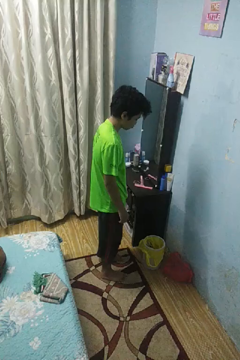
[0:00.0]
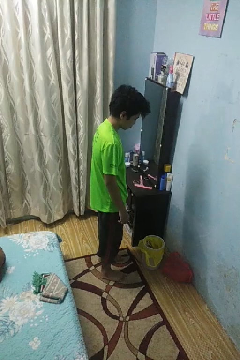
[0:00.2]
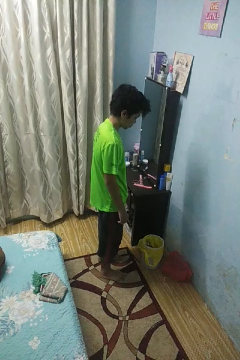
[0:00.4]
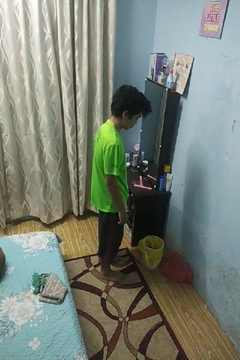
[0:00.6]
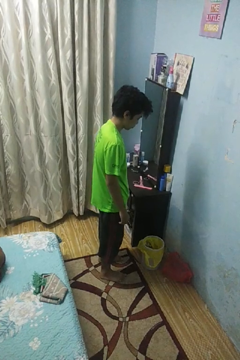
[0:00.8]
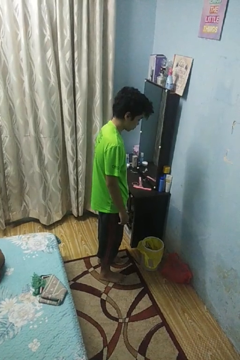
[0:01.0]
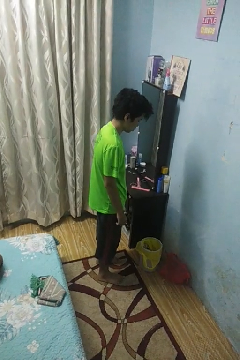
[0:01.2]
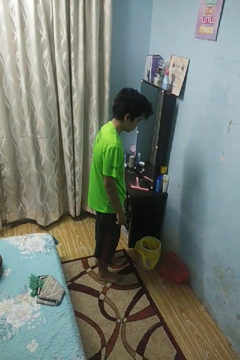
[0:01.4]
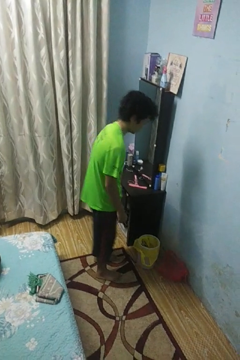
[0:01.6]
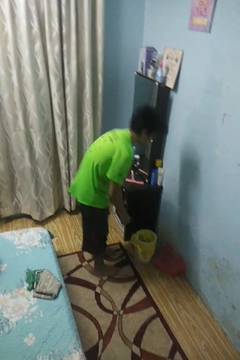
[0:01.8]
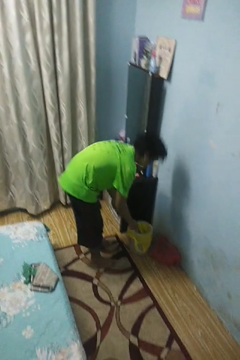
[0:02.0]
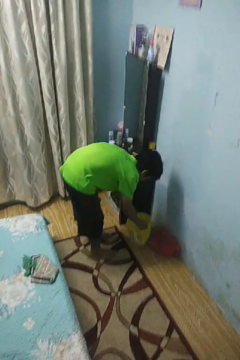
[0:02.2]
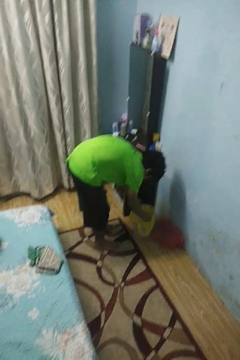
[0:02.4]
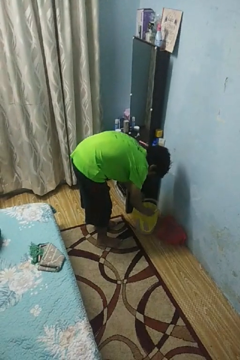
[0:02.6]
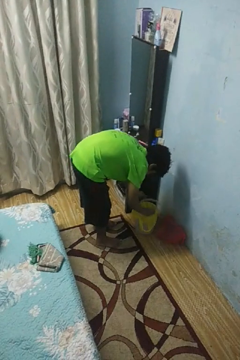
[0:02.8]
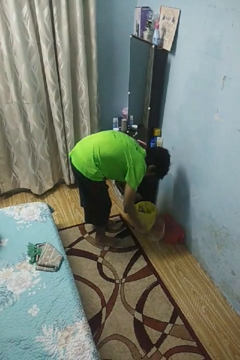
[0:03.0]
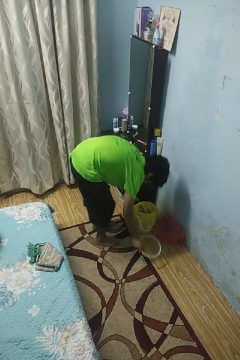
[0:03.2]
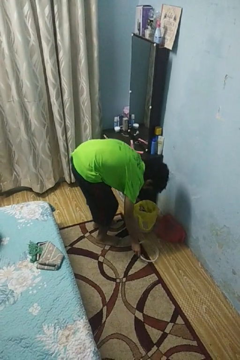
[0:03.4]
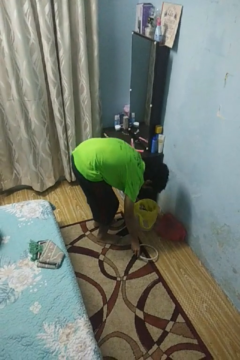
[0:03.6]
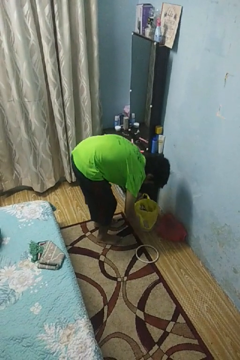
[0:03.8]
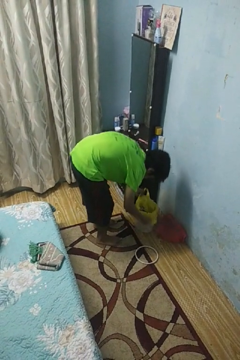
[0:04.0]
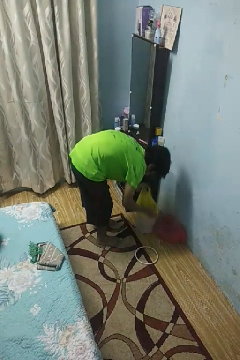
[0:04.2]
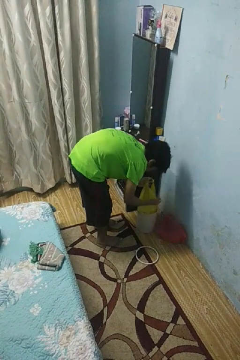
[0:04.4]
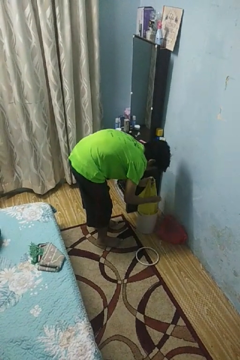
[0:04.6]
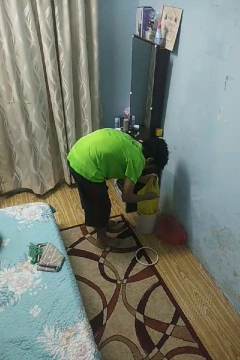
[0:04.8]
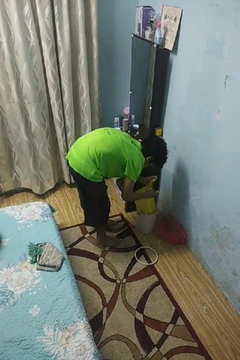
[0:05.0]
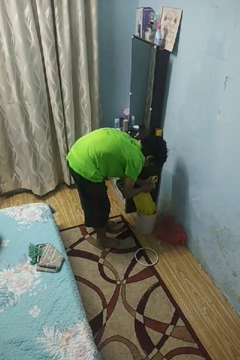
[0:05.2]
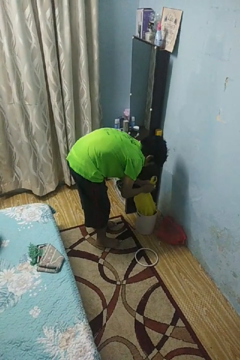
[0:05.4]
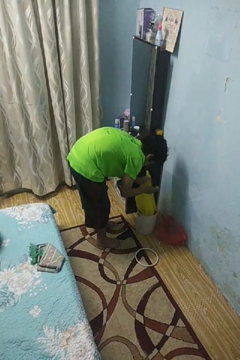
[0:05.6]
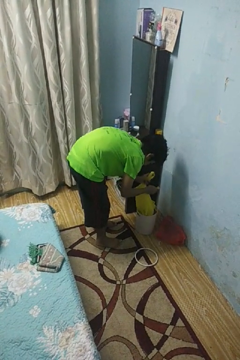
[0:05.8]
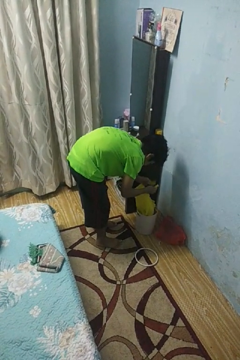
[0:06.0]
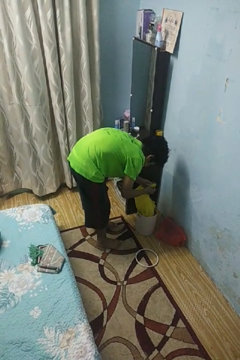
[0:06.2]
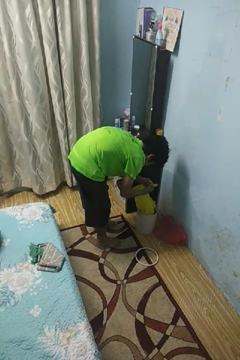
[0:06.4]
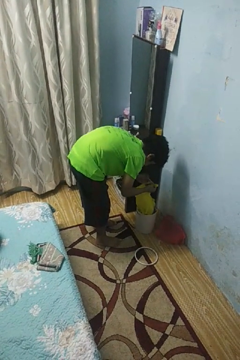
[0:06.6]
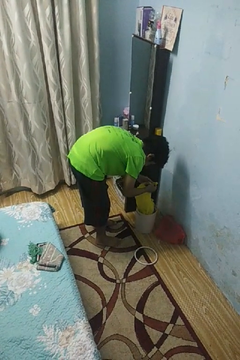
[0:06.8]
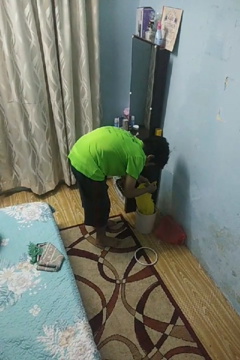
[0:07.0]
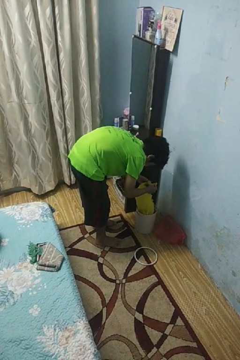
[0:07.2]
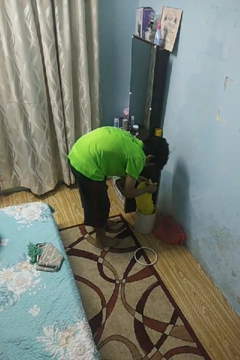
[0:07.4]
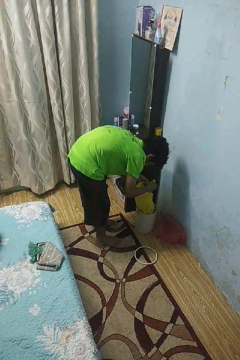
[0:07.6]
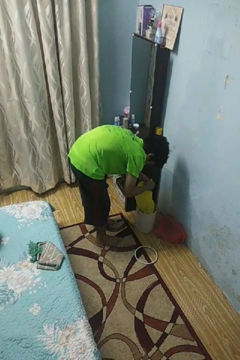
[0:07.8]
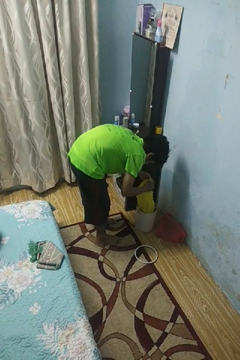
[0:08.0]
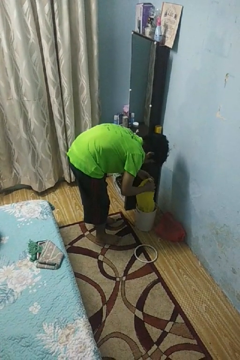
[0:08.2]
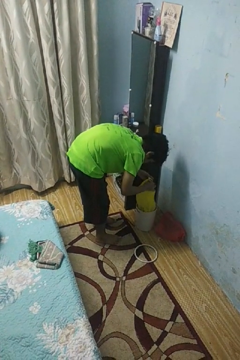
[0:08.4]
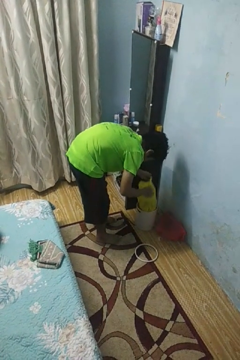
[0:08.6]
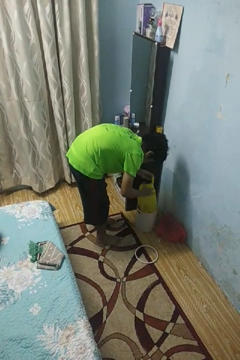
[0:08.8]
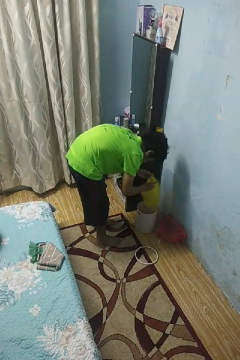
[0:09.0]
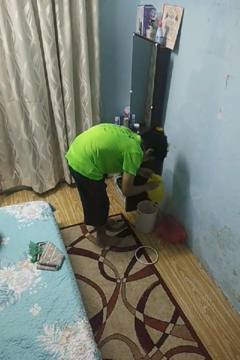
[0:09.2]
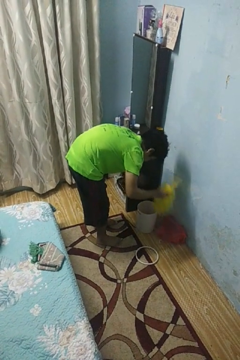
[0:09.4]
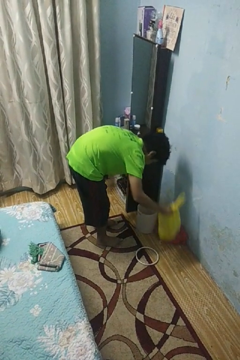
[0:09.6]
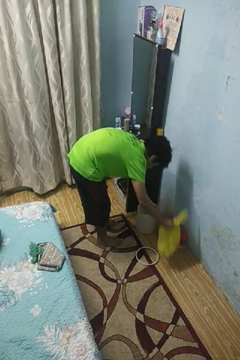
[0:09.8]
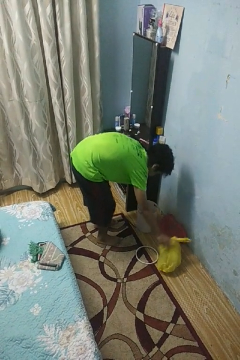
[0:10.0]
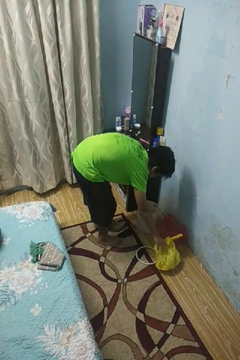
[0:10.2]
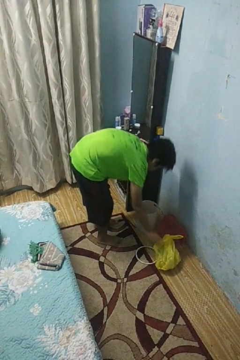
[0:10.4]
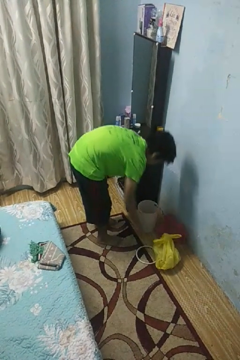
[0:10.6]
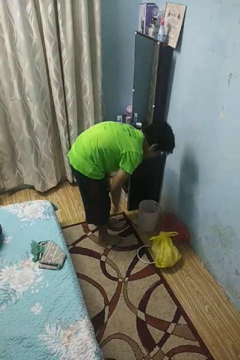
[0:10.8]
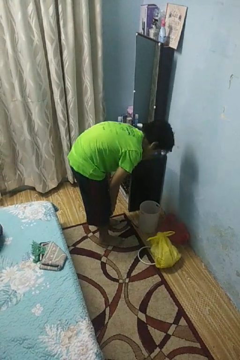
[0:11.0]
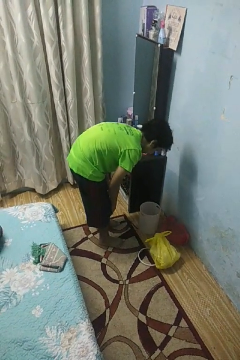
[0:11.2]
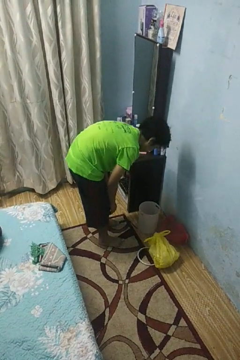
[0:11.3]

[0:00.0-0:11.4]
person removes trashbag from trashcan

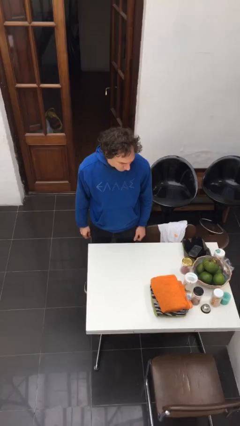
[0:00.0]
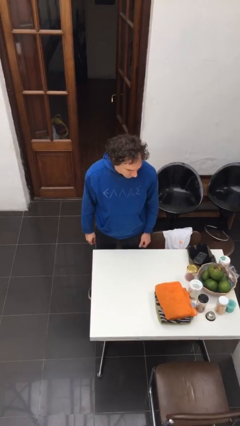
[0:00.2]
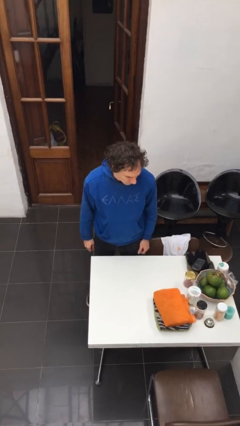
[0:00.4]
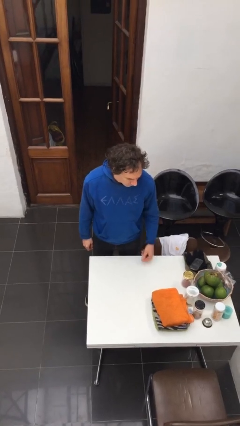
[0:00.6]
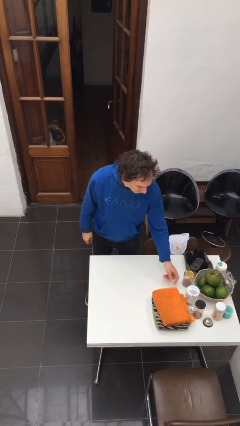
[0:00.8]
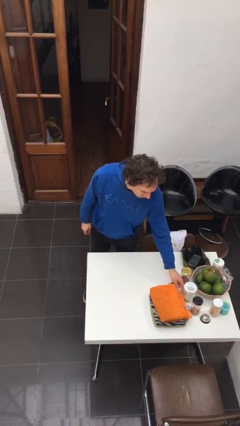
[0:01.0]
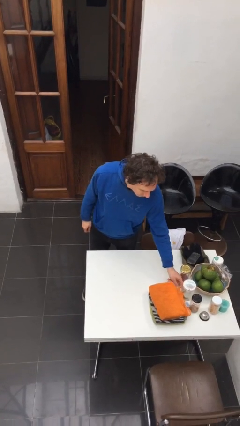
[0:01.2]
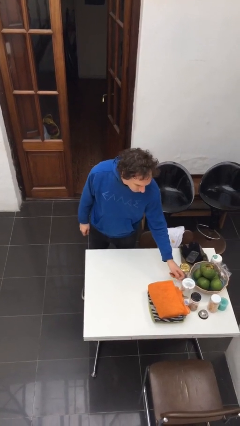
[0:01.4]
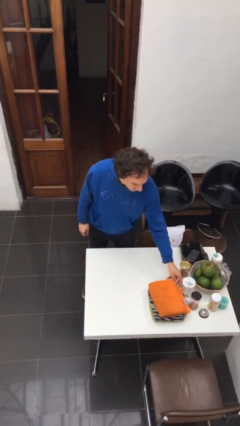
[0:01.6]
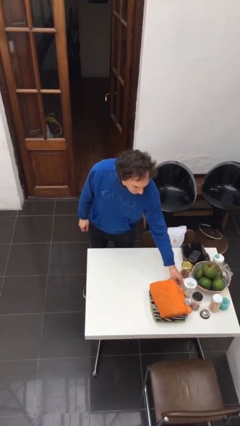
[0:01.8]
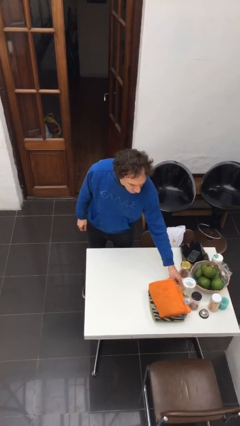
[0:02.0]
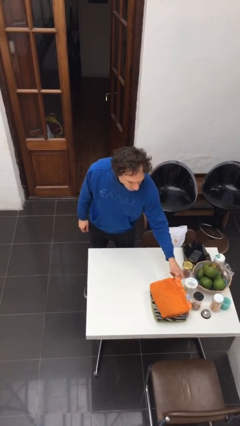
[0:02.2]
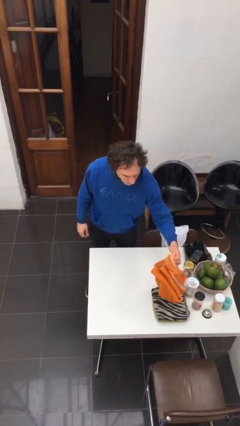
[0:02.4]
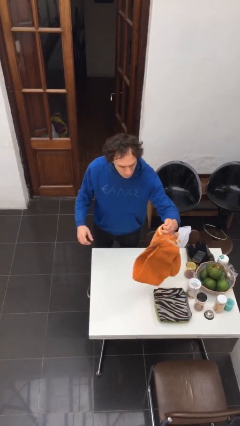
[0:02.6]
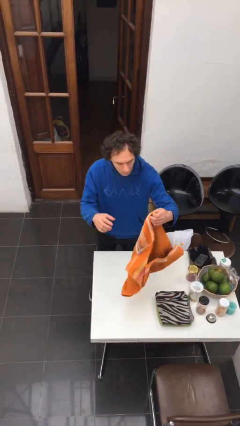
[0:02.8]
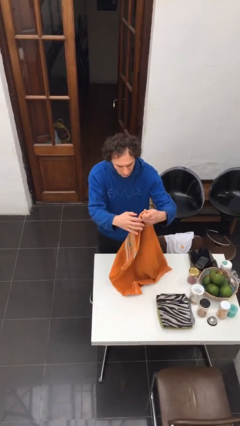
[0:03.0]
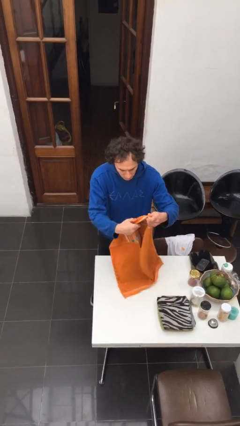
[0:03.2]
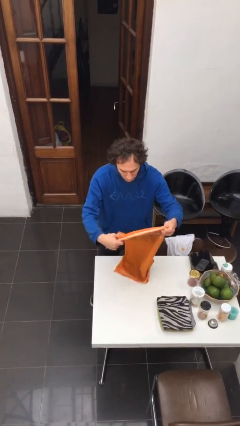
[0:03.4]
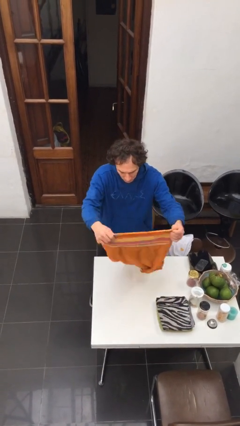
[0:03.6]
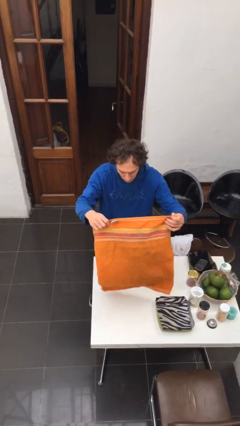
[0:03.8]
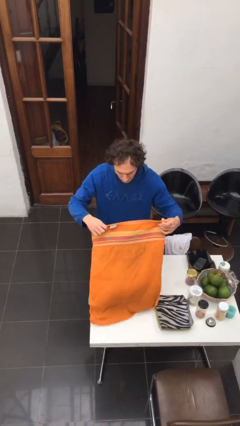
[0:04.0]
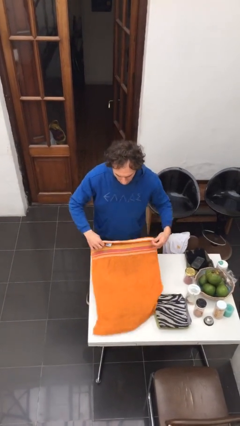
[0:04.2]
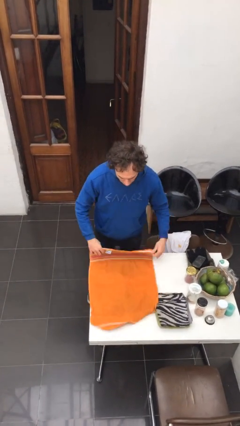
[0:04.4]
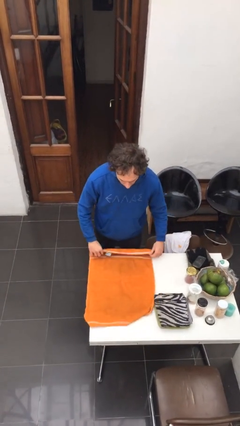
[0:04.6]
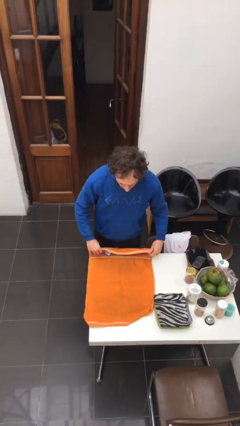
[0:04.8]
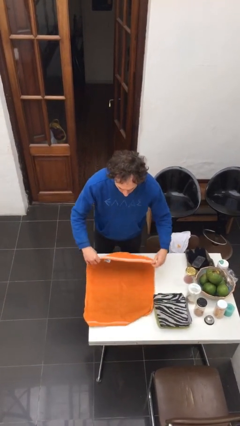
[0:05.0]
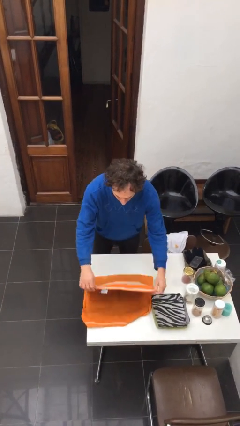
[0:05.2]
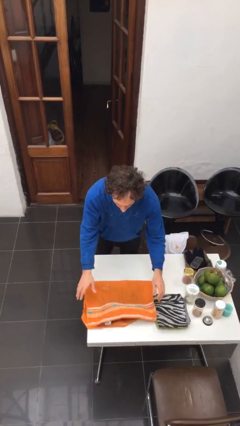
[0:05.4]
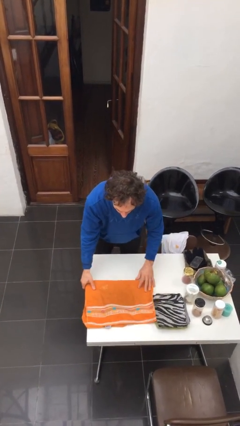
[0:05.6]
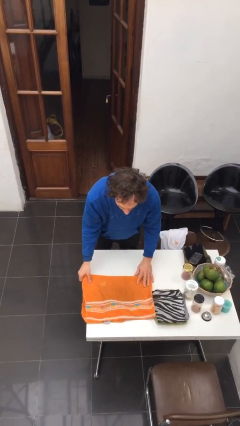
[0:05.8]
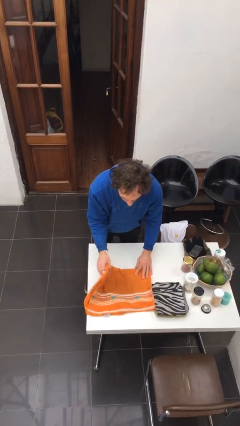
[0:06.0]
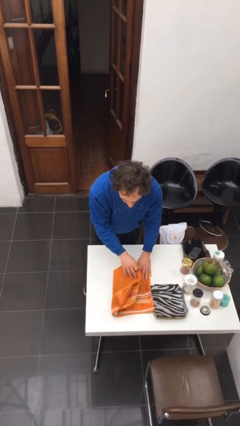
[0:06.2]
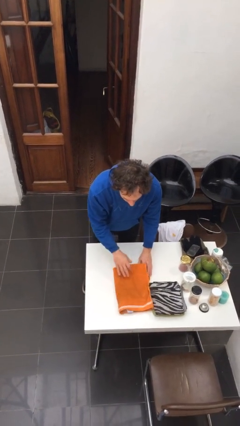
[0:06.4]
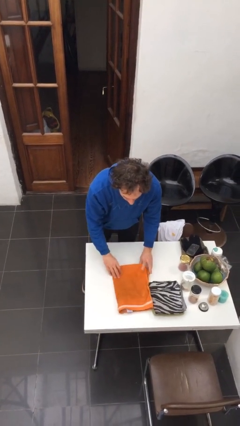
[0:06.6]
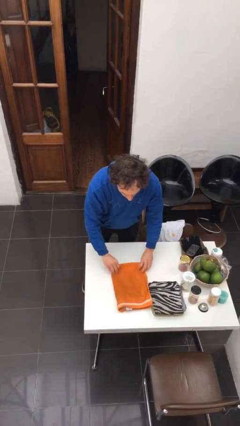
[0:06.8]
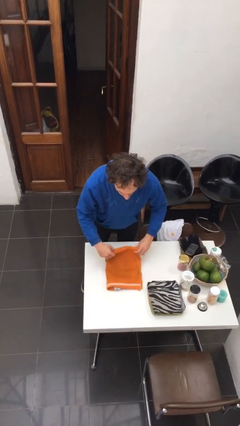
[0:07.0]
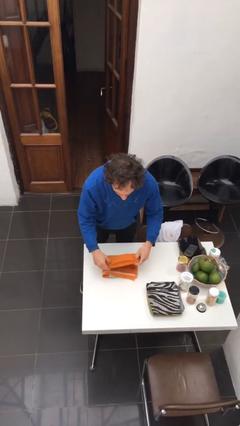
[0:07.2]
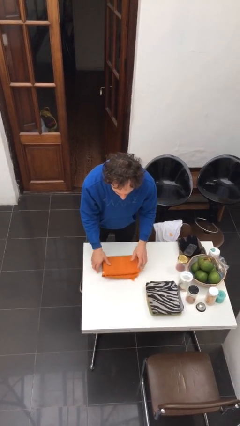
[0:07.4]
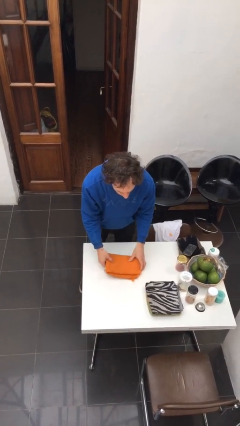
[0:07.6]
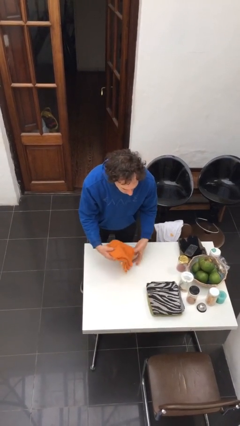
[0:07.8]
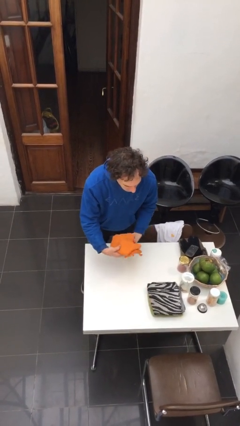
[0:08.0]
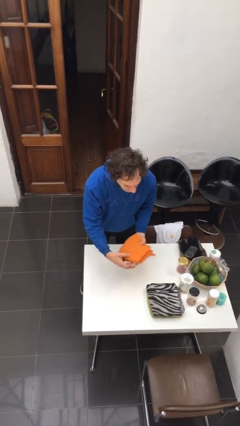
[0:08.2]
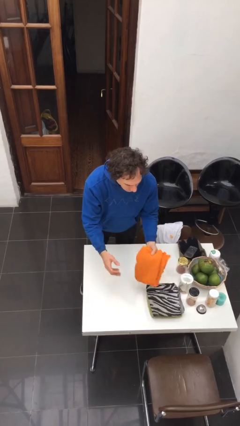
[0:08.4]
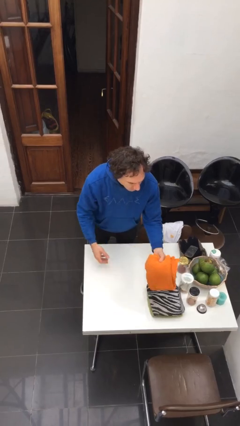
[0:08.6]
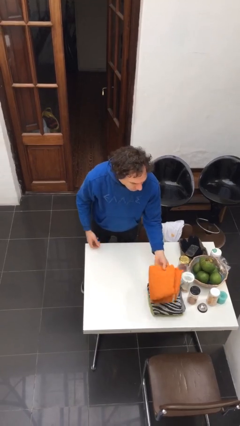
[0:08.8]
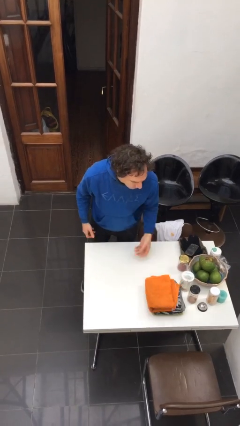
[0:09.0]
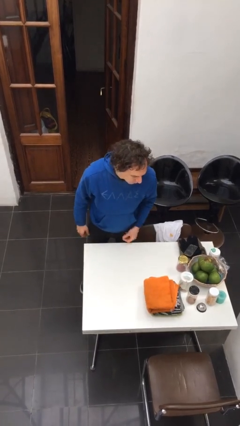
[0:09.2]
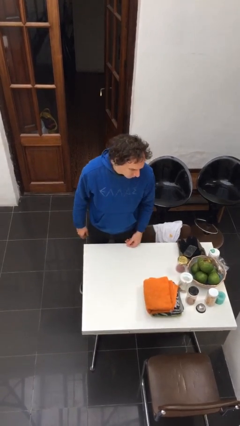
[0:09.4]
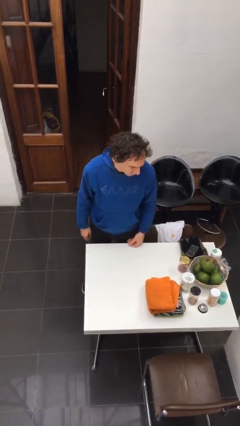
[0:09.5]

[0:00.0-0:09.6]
person folds towel
